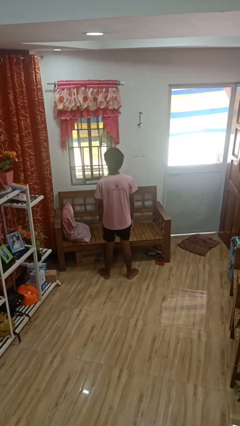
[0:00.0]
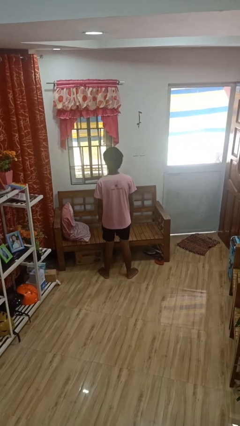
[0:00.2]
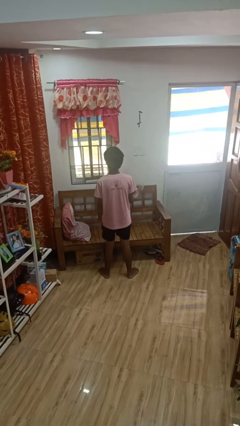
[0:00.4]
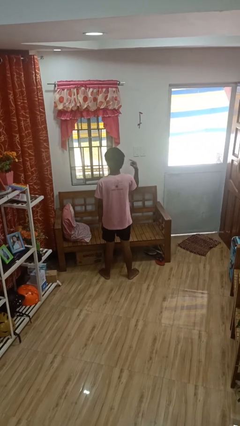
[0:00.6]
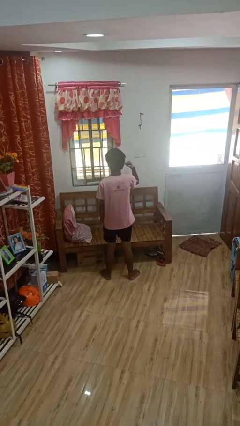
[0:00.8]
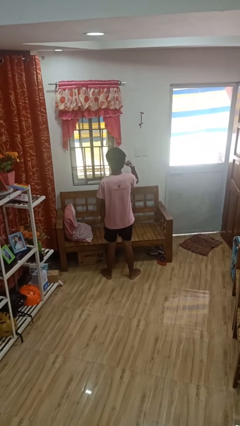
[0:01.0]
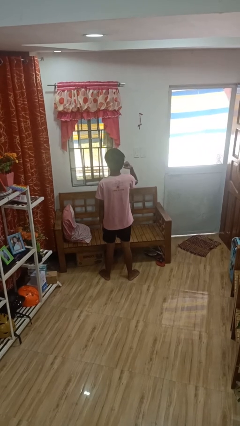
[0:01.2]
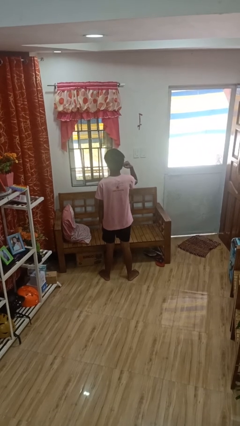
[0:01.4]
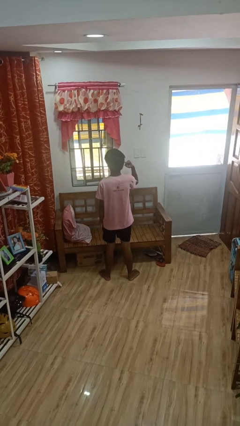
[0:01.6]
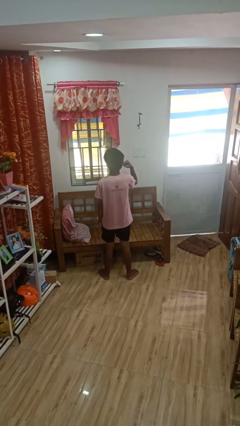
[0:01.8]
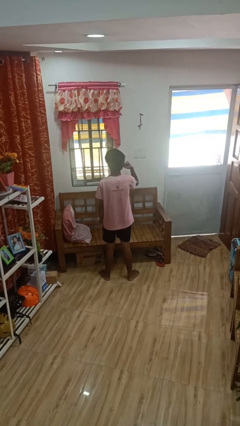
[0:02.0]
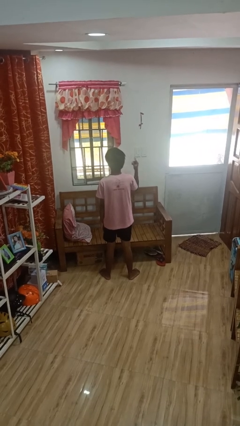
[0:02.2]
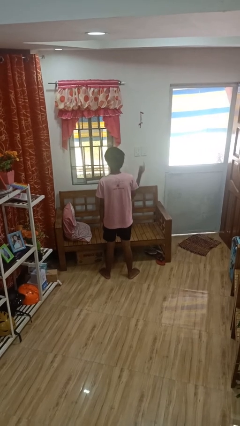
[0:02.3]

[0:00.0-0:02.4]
person gestures listen closely

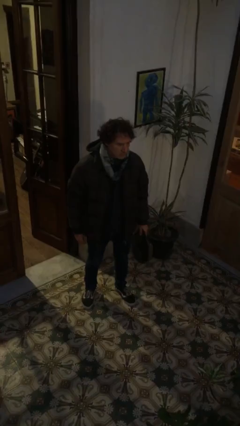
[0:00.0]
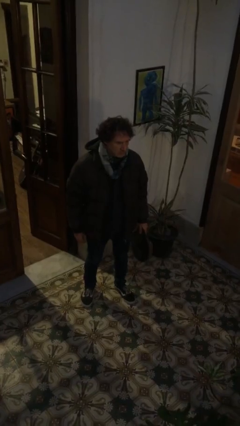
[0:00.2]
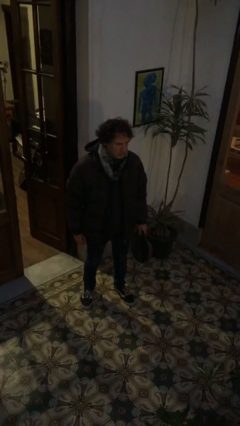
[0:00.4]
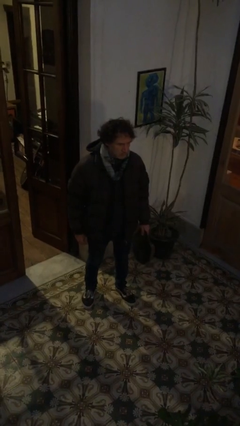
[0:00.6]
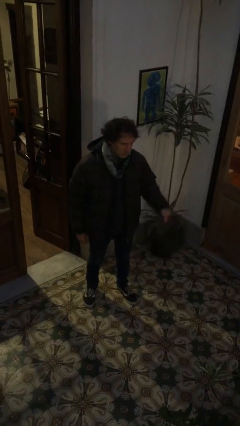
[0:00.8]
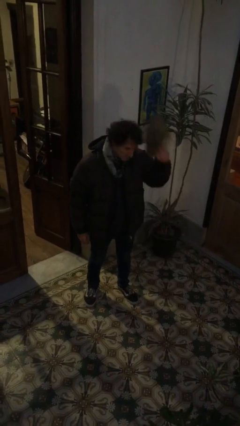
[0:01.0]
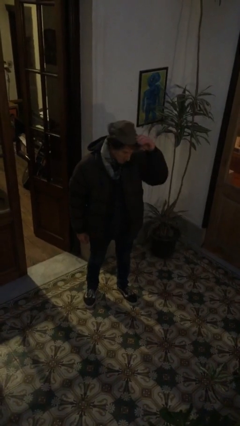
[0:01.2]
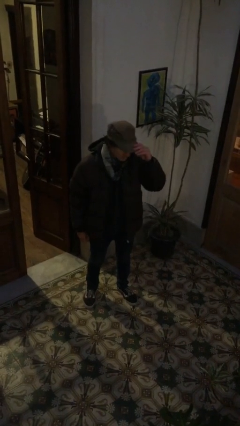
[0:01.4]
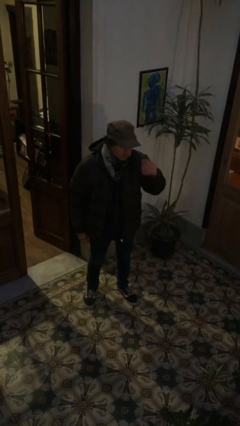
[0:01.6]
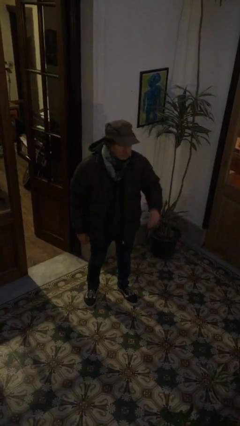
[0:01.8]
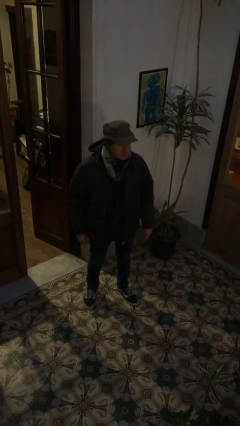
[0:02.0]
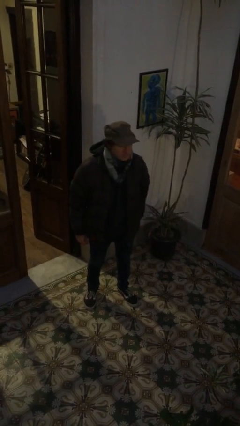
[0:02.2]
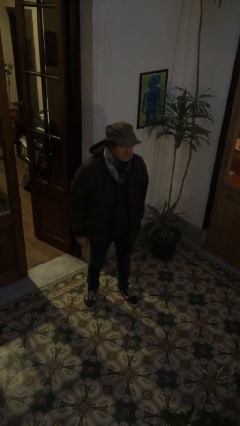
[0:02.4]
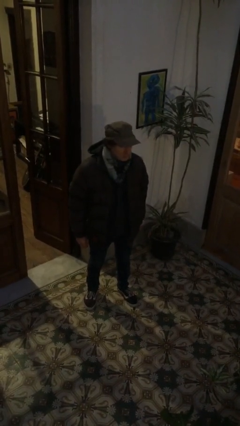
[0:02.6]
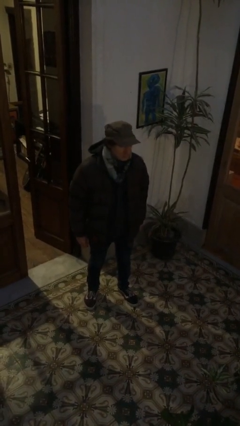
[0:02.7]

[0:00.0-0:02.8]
person puts on hat

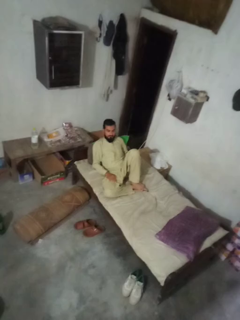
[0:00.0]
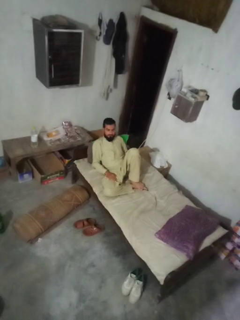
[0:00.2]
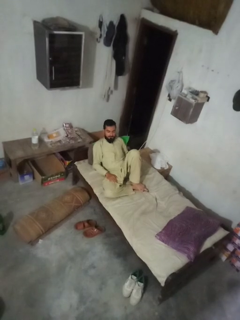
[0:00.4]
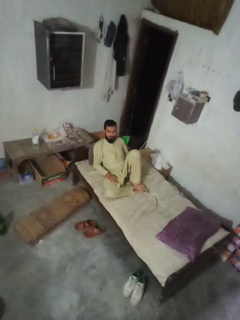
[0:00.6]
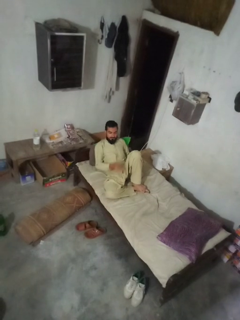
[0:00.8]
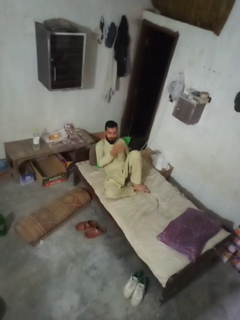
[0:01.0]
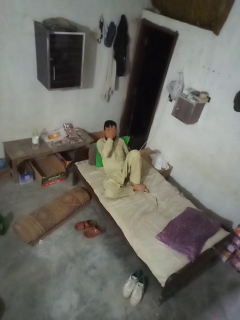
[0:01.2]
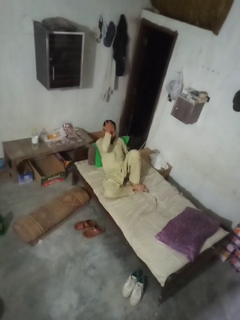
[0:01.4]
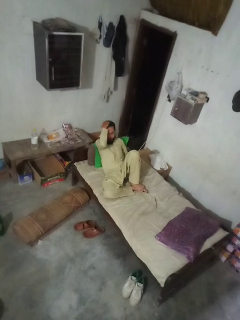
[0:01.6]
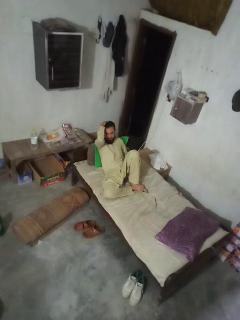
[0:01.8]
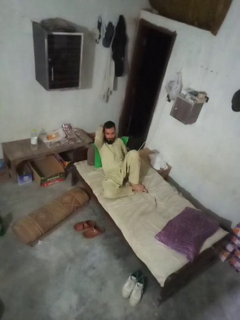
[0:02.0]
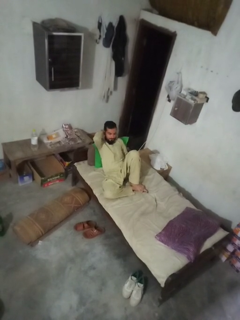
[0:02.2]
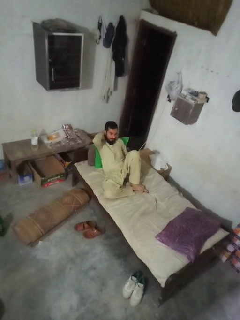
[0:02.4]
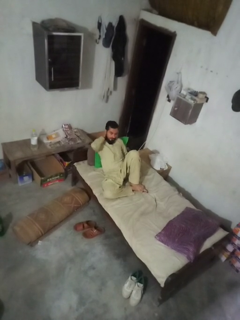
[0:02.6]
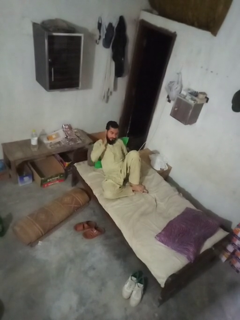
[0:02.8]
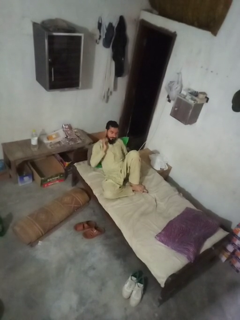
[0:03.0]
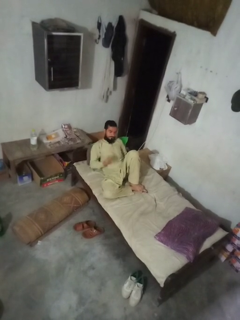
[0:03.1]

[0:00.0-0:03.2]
person strokes hair

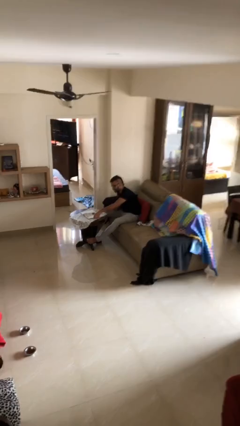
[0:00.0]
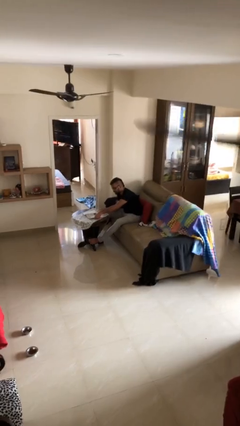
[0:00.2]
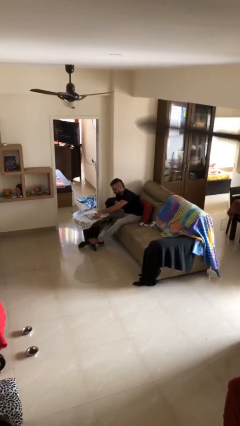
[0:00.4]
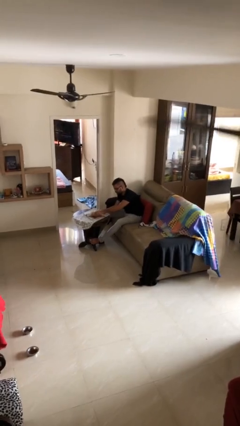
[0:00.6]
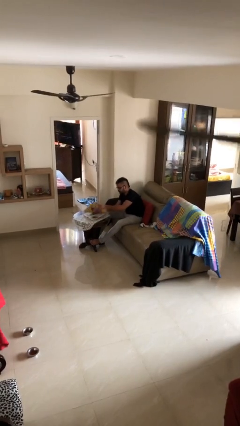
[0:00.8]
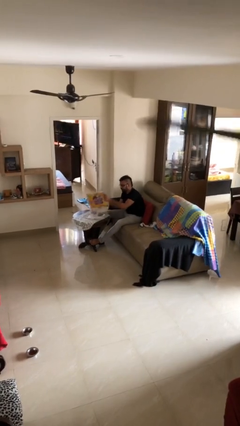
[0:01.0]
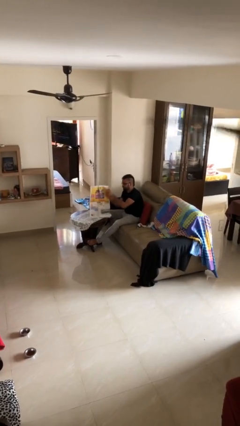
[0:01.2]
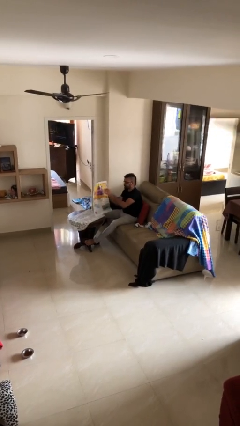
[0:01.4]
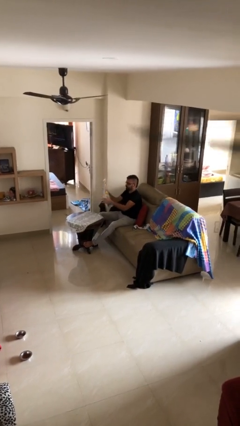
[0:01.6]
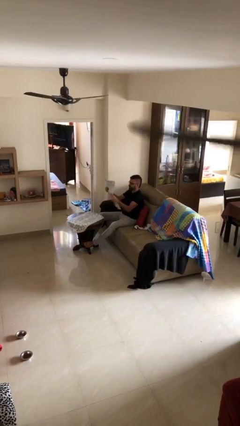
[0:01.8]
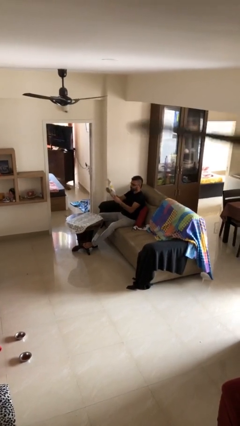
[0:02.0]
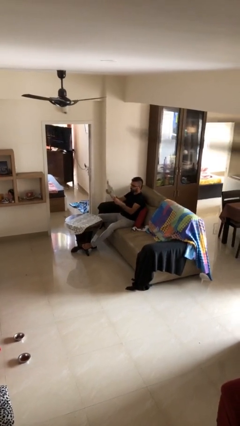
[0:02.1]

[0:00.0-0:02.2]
person picks up object from table

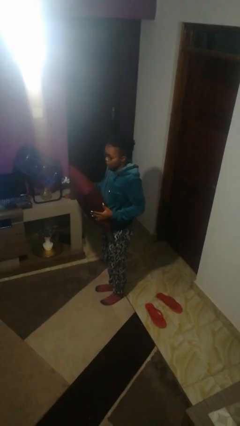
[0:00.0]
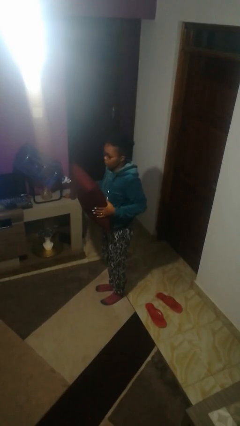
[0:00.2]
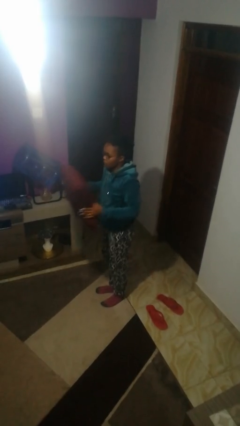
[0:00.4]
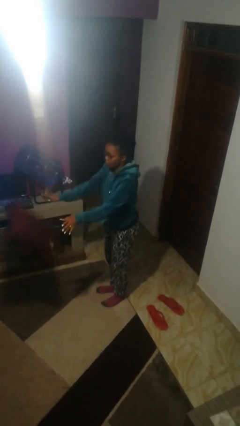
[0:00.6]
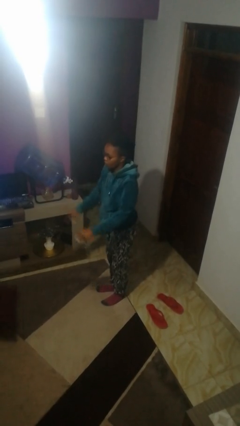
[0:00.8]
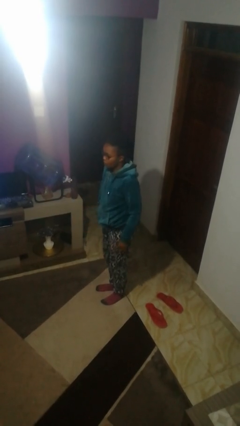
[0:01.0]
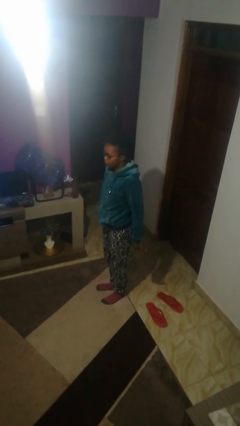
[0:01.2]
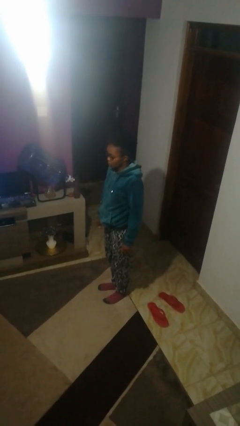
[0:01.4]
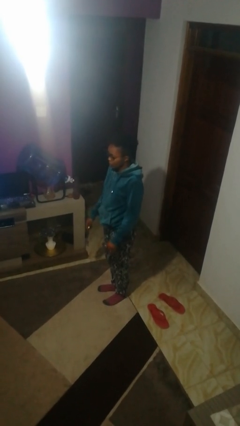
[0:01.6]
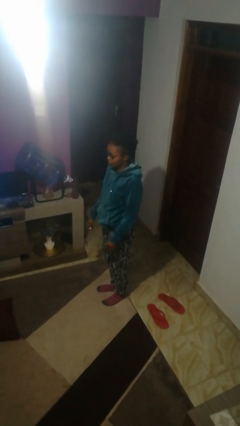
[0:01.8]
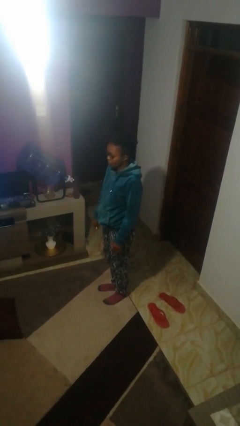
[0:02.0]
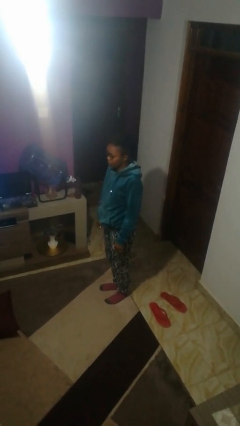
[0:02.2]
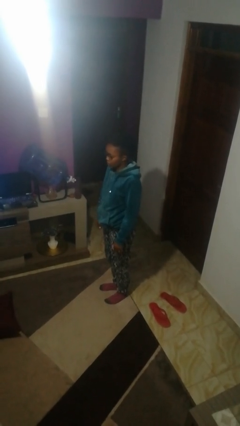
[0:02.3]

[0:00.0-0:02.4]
person throws object to ground

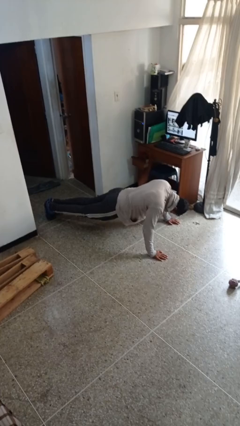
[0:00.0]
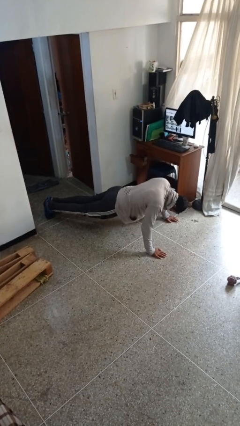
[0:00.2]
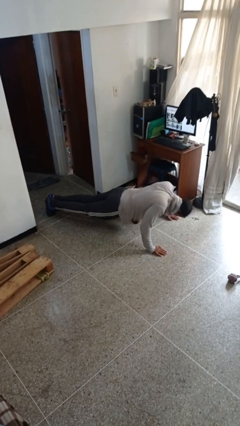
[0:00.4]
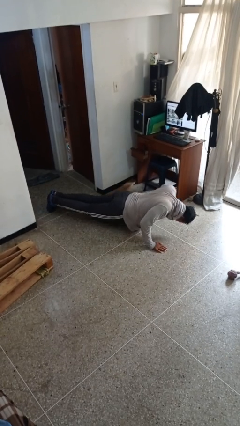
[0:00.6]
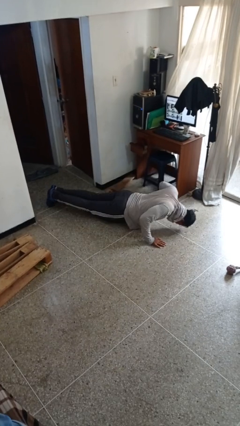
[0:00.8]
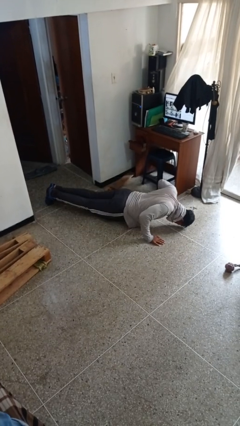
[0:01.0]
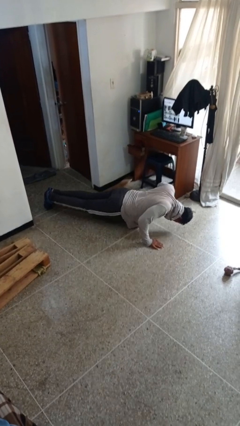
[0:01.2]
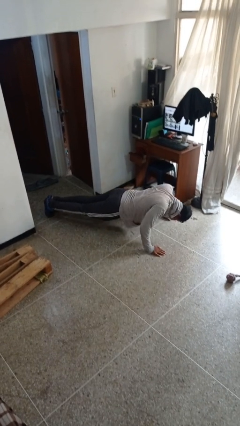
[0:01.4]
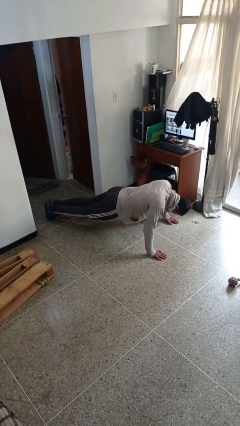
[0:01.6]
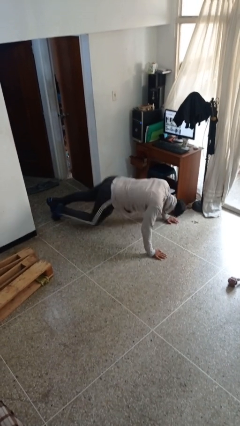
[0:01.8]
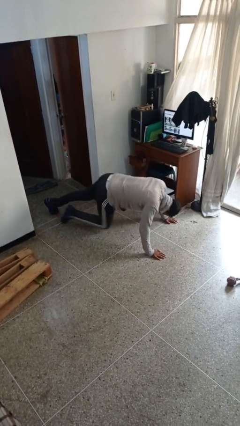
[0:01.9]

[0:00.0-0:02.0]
person exercises with pushup

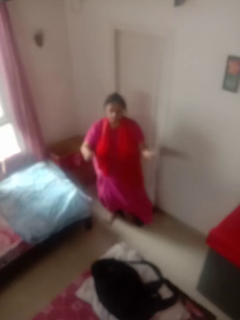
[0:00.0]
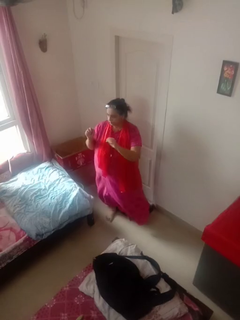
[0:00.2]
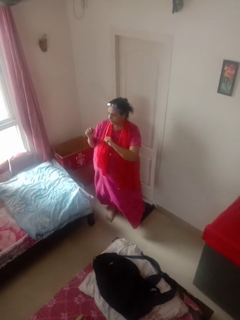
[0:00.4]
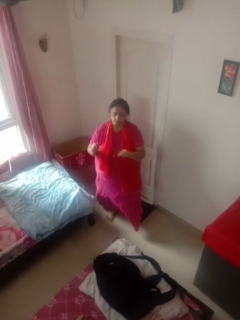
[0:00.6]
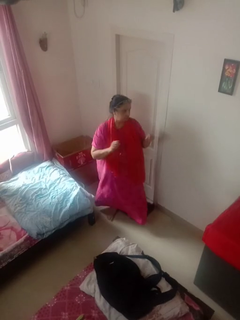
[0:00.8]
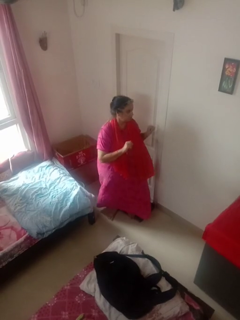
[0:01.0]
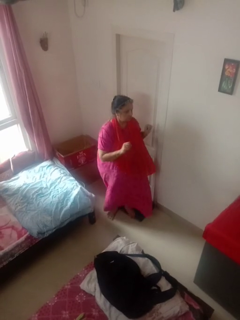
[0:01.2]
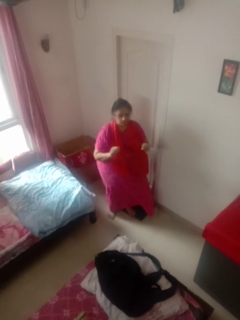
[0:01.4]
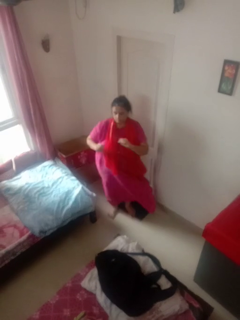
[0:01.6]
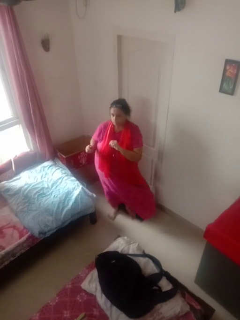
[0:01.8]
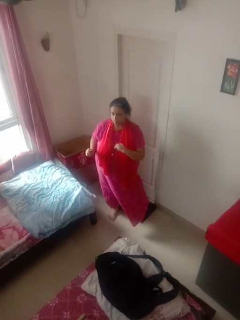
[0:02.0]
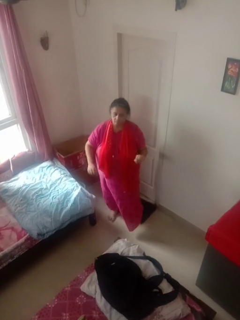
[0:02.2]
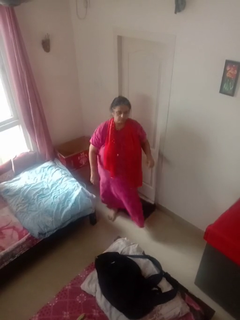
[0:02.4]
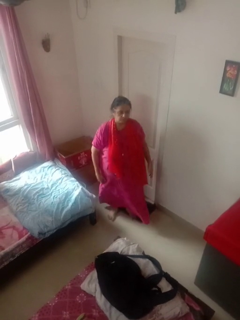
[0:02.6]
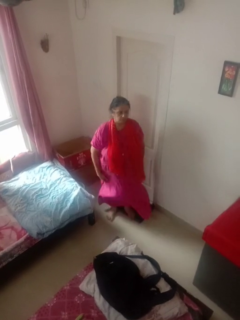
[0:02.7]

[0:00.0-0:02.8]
person dances in place

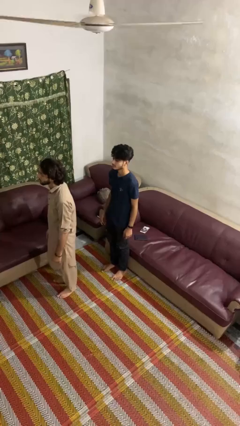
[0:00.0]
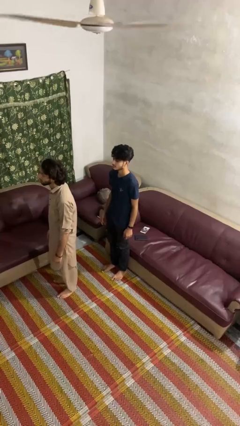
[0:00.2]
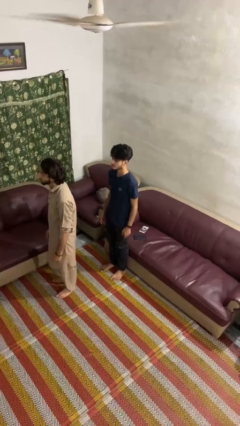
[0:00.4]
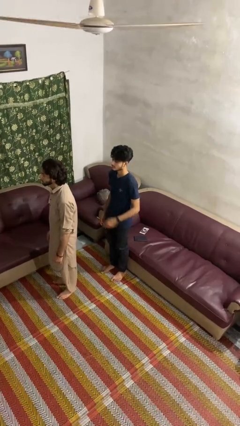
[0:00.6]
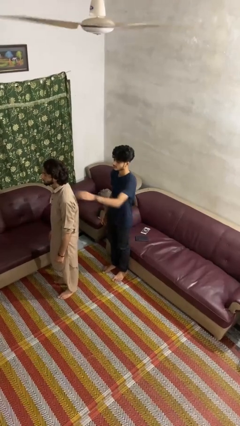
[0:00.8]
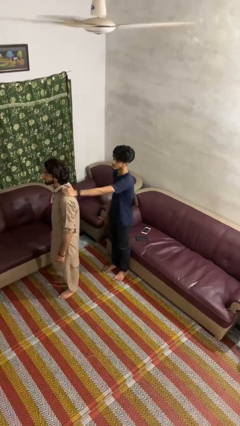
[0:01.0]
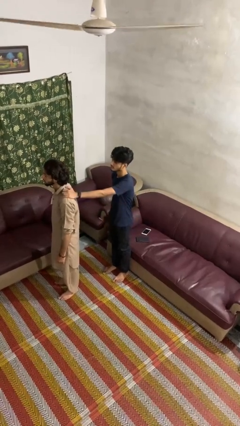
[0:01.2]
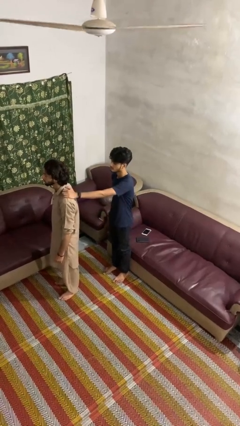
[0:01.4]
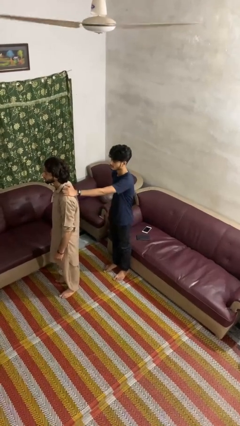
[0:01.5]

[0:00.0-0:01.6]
person grabs person by shoulder
